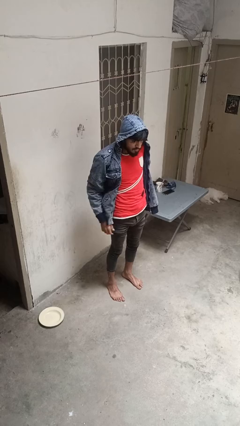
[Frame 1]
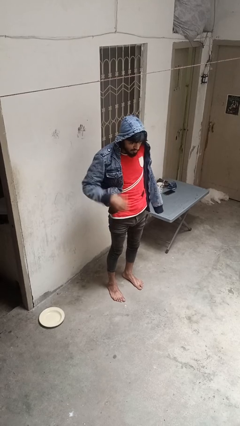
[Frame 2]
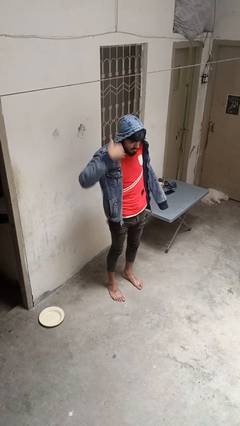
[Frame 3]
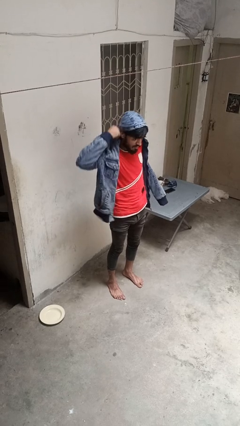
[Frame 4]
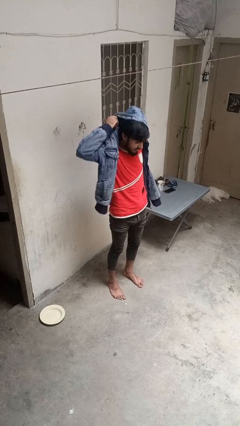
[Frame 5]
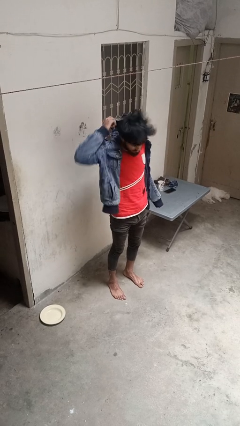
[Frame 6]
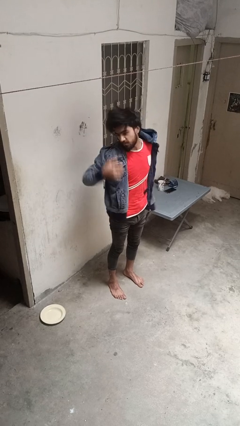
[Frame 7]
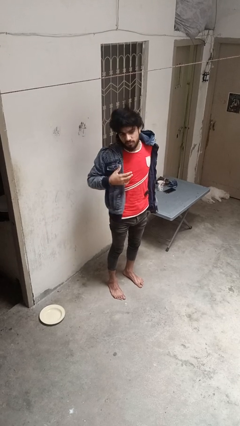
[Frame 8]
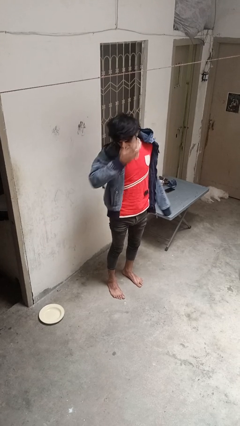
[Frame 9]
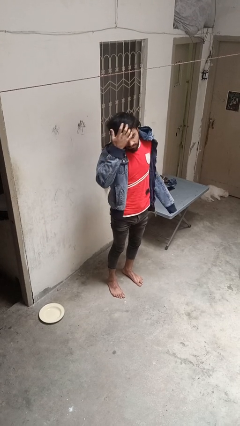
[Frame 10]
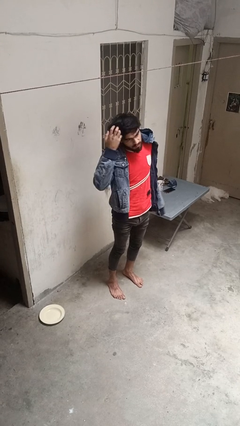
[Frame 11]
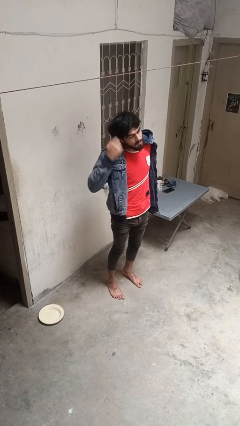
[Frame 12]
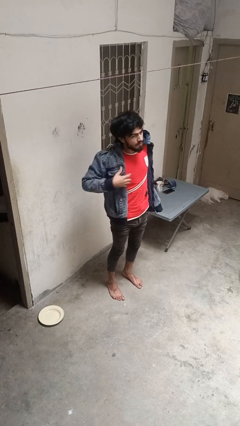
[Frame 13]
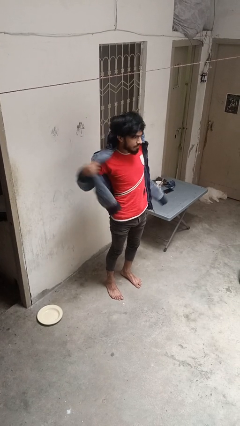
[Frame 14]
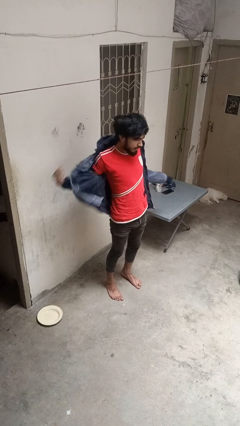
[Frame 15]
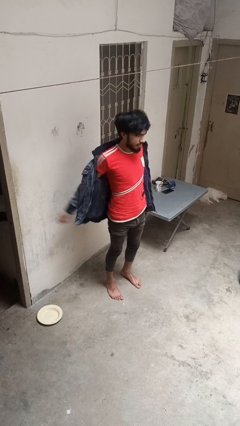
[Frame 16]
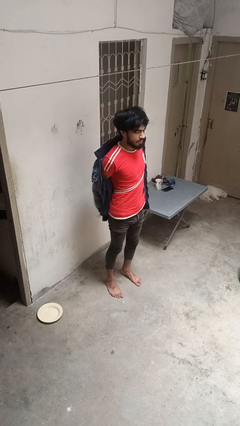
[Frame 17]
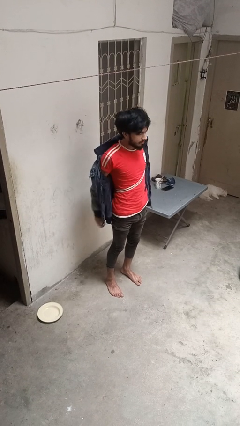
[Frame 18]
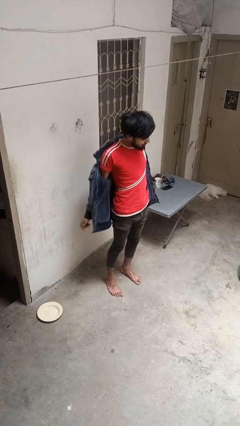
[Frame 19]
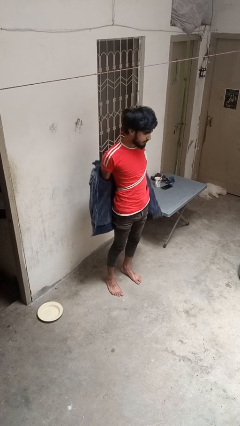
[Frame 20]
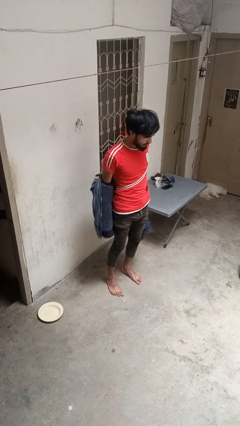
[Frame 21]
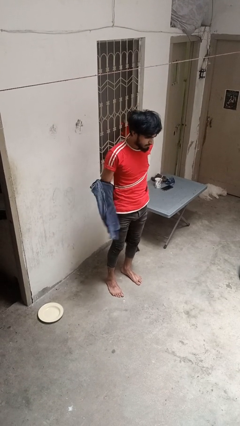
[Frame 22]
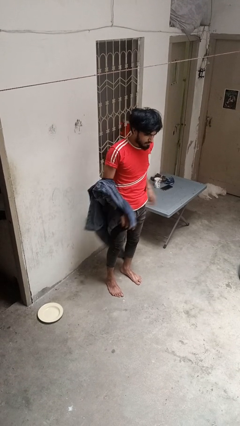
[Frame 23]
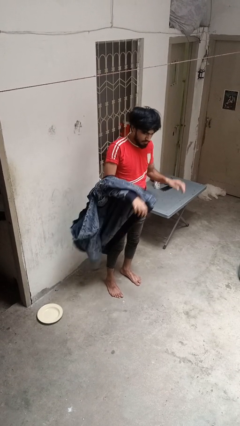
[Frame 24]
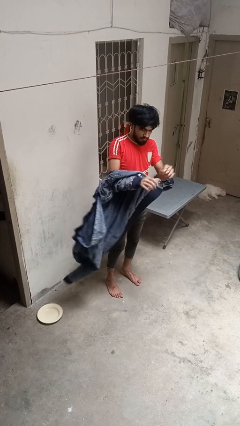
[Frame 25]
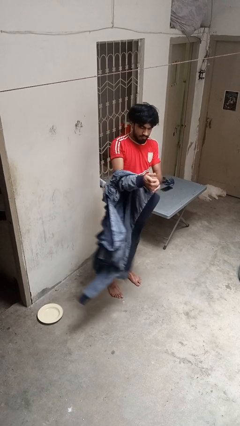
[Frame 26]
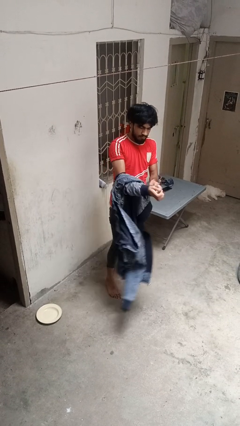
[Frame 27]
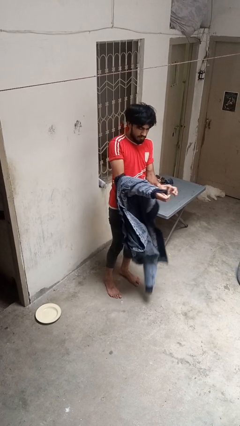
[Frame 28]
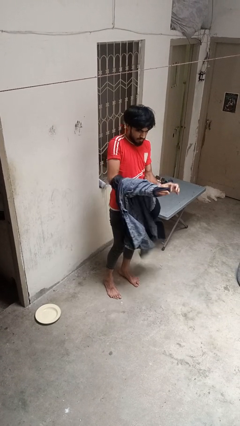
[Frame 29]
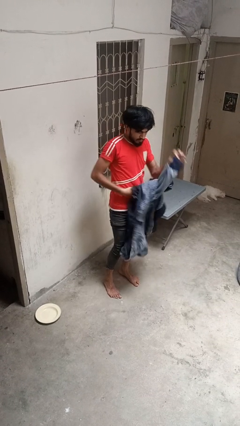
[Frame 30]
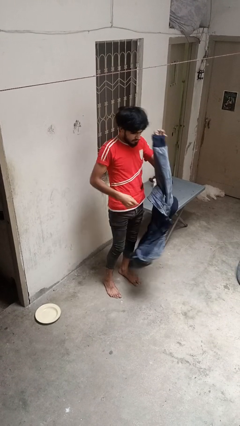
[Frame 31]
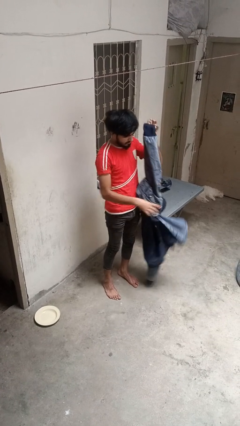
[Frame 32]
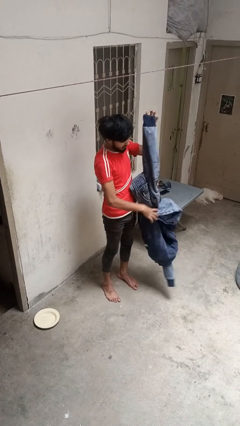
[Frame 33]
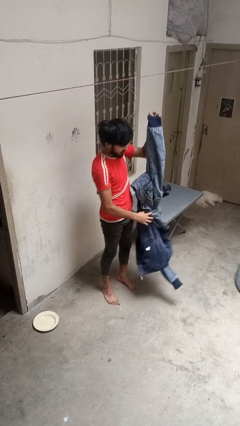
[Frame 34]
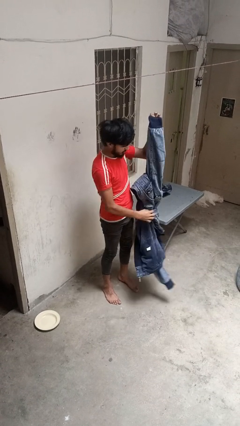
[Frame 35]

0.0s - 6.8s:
person takes off hoodie

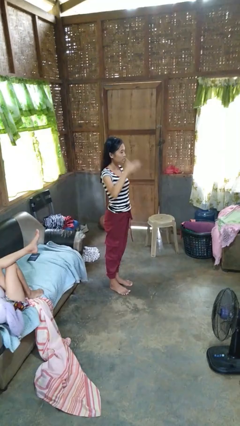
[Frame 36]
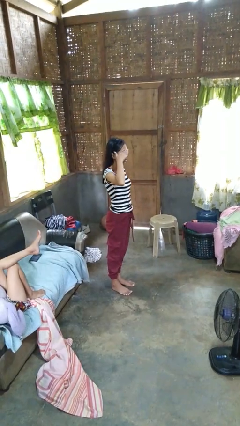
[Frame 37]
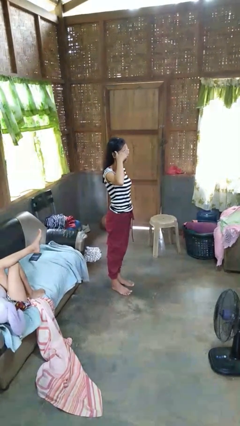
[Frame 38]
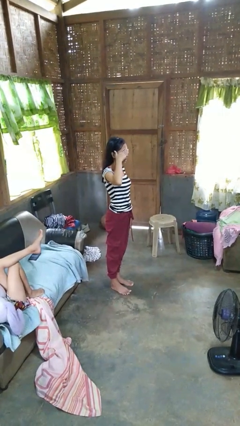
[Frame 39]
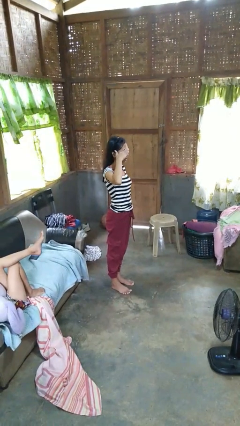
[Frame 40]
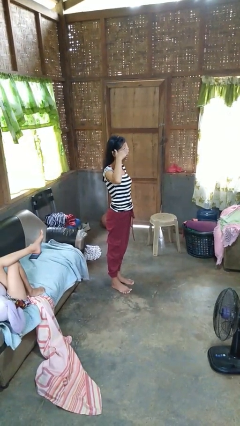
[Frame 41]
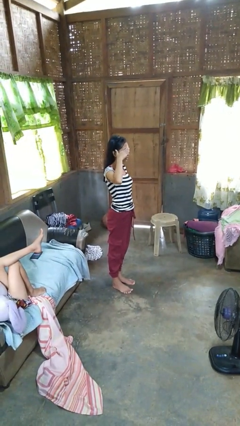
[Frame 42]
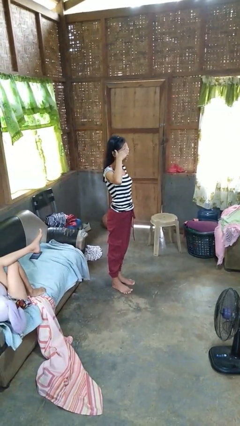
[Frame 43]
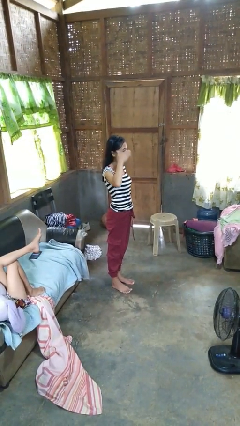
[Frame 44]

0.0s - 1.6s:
person salutes

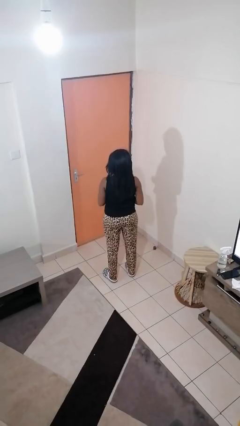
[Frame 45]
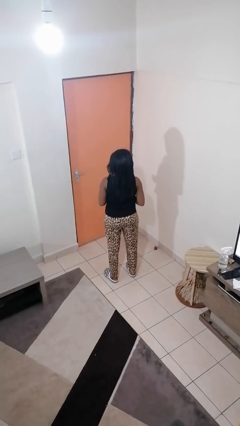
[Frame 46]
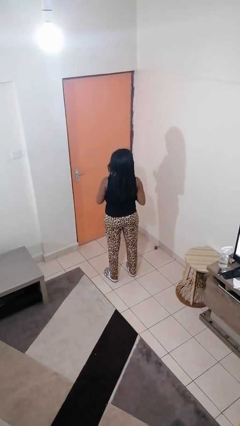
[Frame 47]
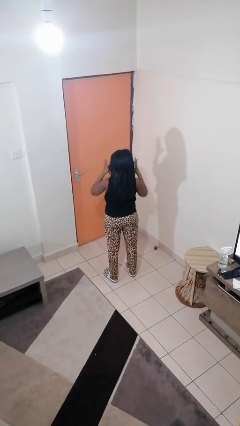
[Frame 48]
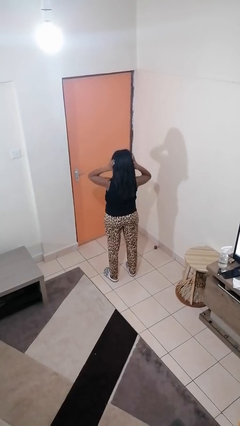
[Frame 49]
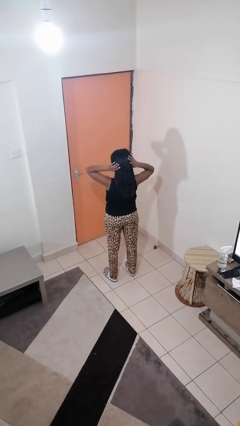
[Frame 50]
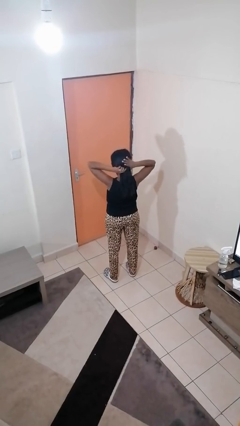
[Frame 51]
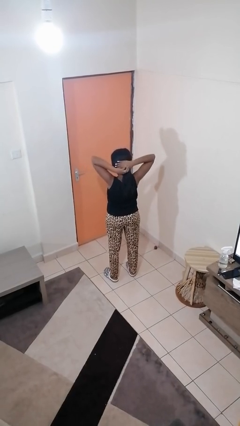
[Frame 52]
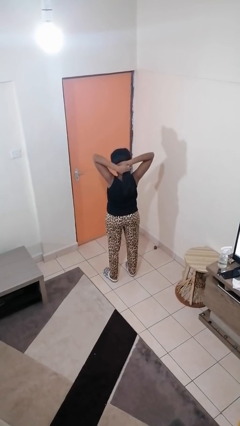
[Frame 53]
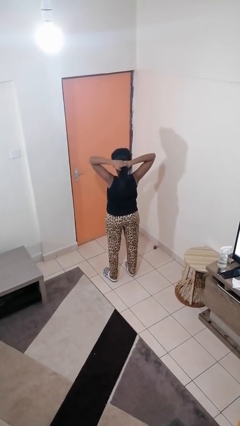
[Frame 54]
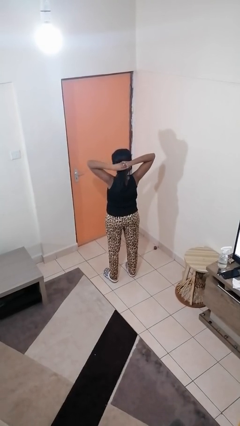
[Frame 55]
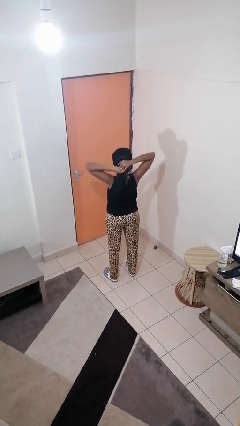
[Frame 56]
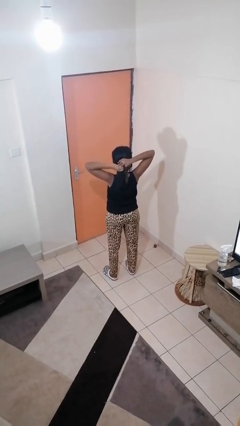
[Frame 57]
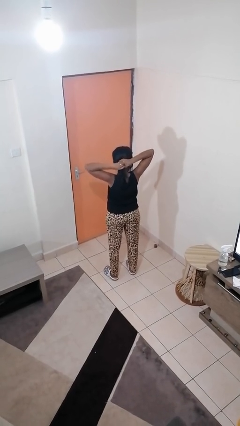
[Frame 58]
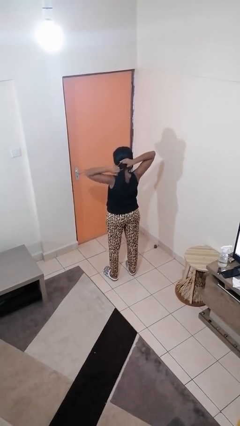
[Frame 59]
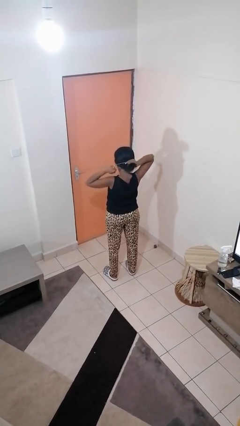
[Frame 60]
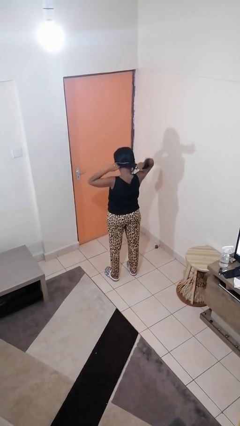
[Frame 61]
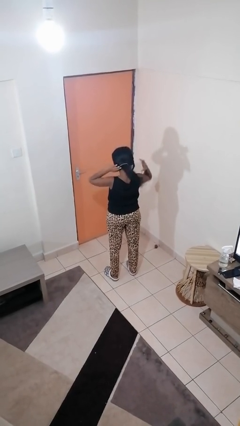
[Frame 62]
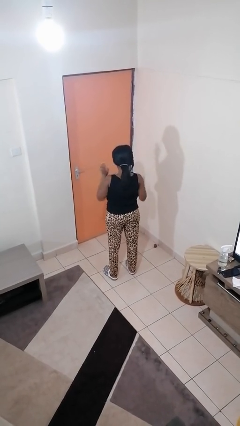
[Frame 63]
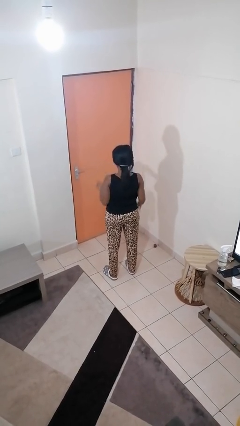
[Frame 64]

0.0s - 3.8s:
person puts hair in ponytail

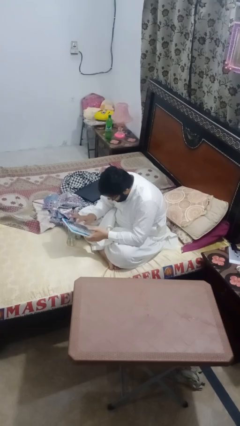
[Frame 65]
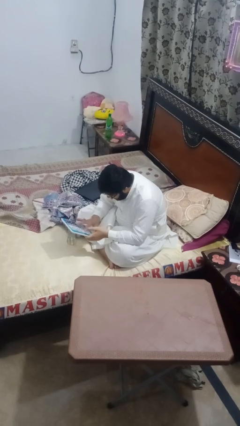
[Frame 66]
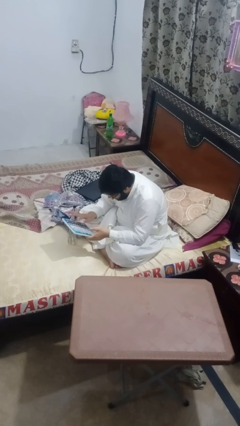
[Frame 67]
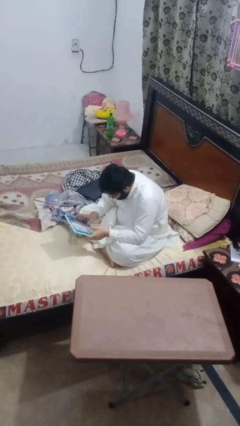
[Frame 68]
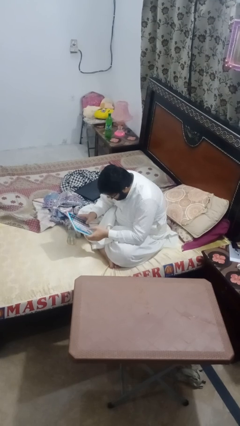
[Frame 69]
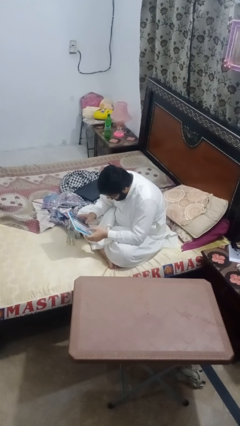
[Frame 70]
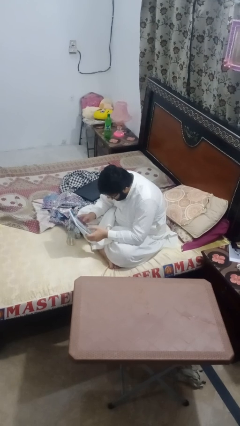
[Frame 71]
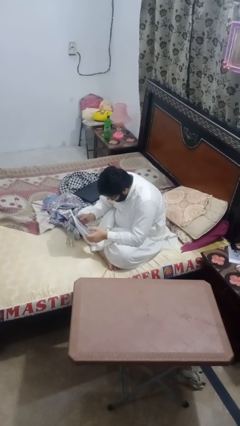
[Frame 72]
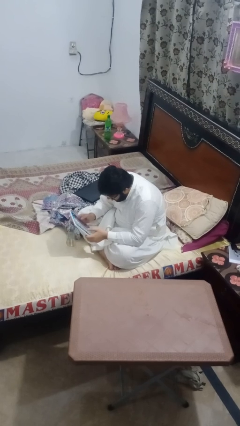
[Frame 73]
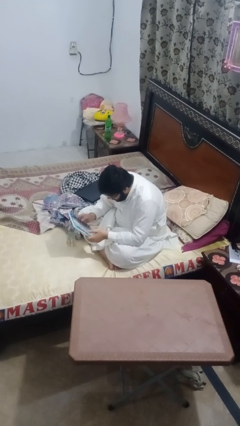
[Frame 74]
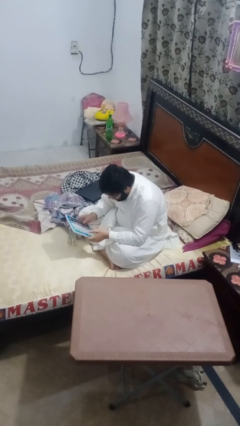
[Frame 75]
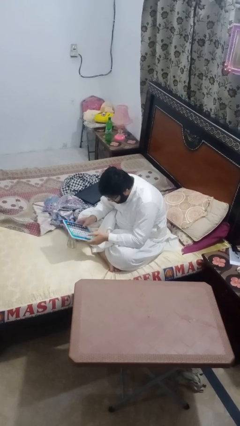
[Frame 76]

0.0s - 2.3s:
person interacts with tablet

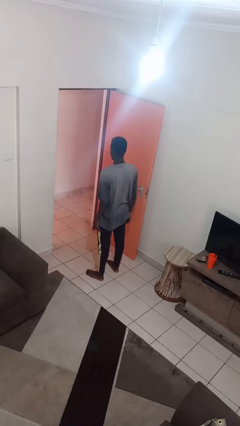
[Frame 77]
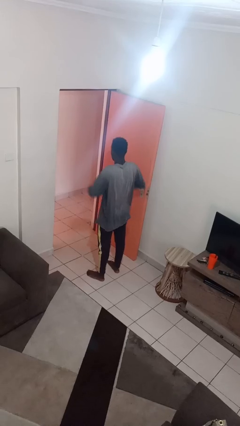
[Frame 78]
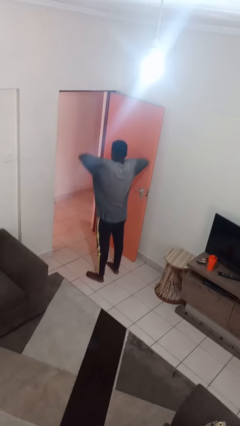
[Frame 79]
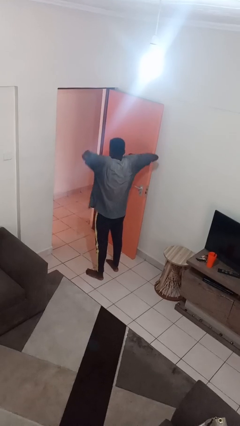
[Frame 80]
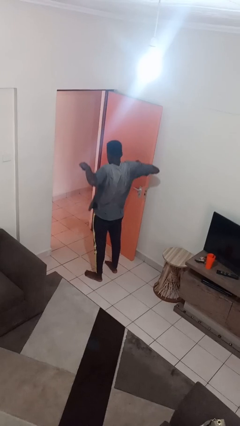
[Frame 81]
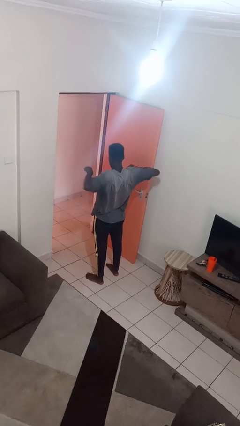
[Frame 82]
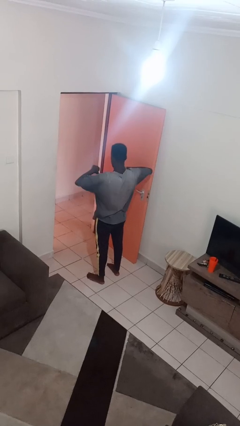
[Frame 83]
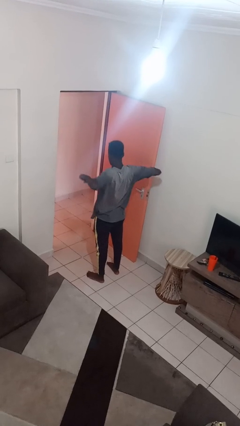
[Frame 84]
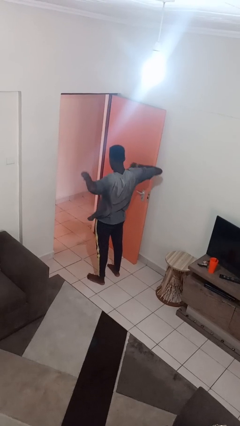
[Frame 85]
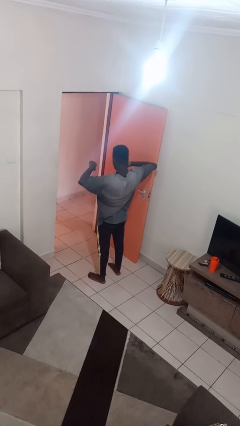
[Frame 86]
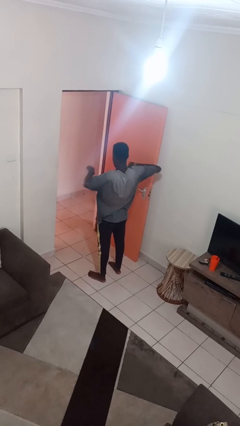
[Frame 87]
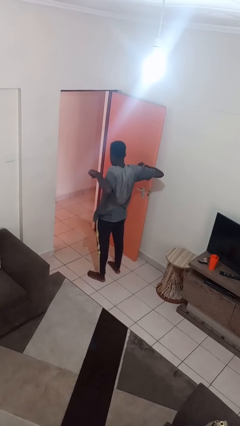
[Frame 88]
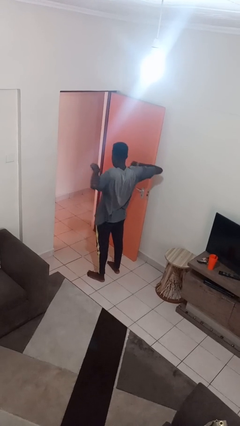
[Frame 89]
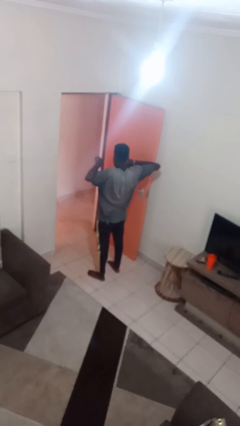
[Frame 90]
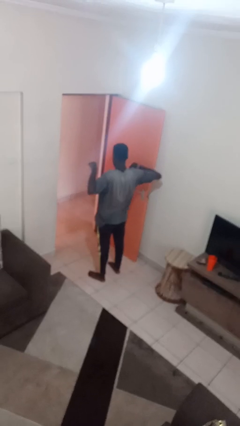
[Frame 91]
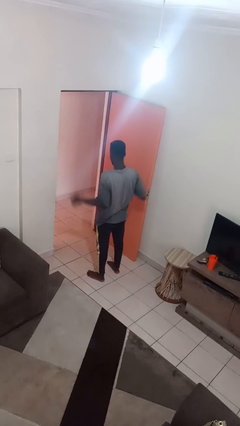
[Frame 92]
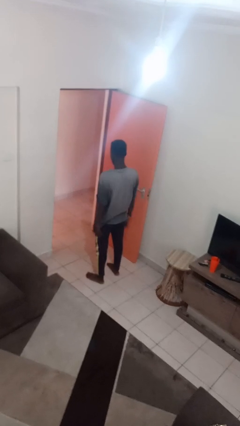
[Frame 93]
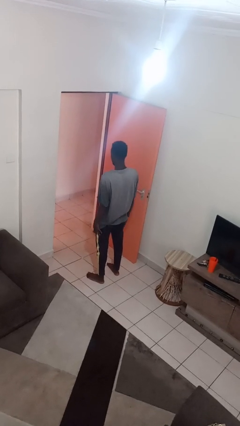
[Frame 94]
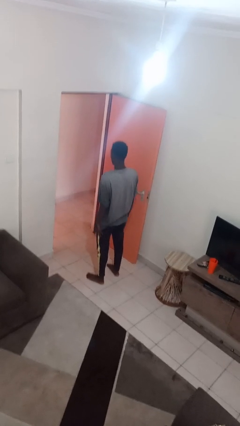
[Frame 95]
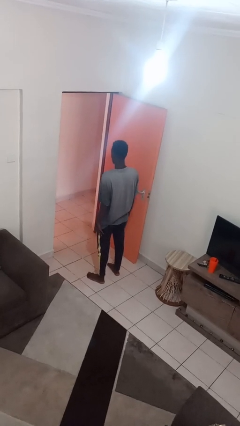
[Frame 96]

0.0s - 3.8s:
person stretches arms to side
